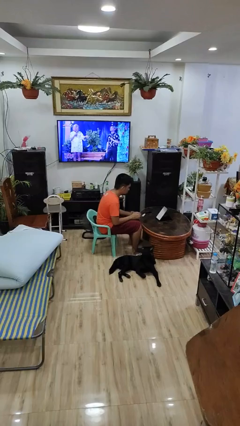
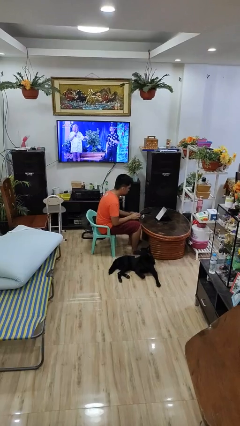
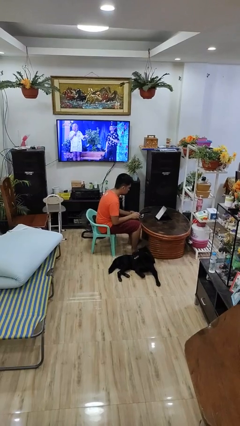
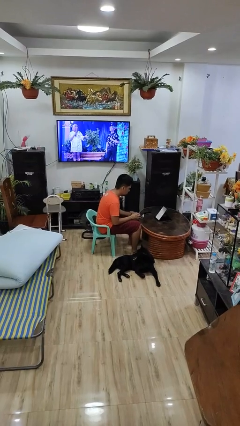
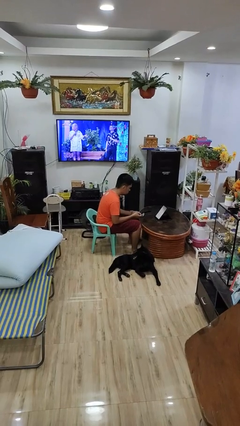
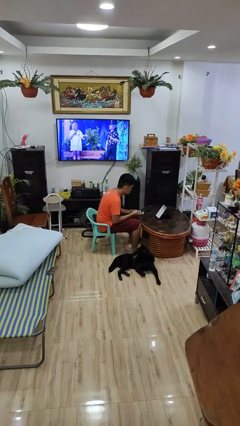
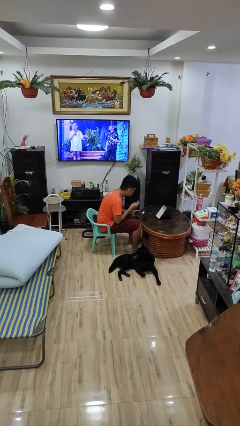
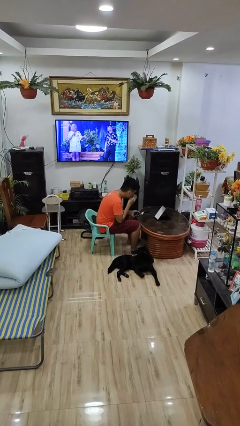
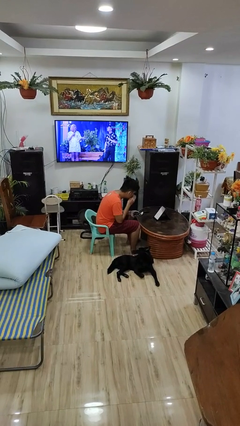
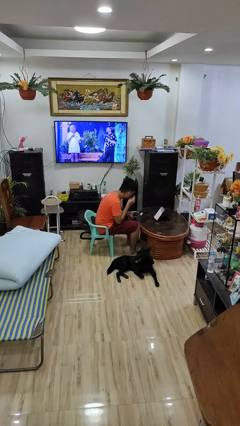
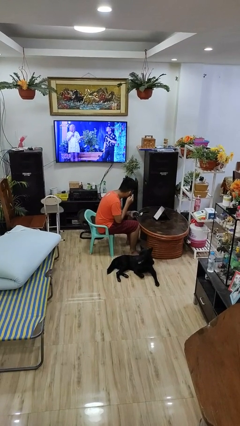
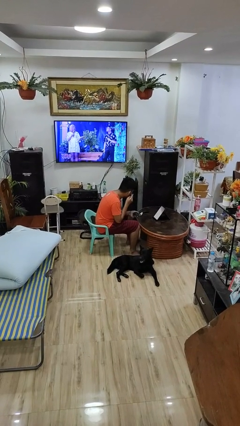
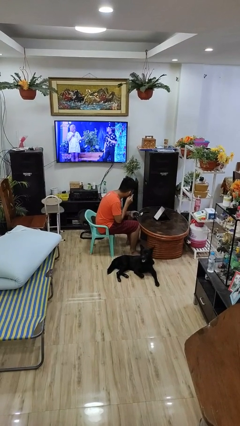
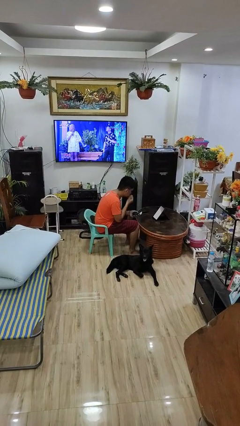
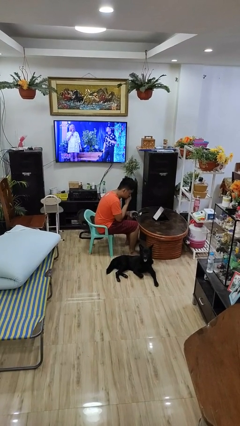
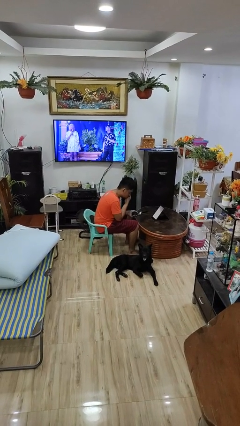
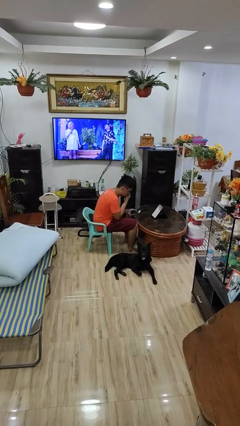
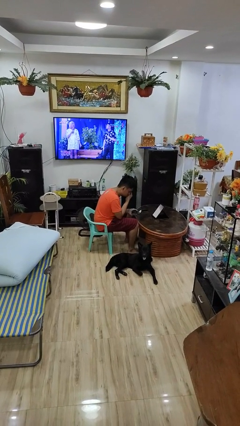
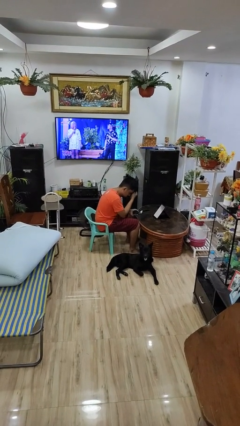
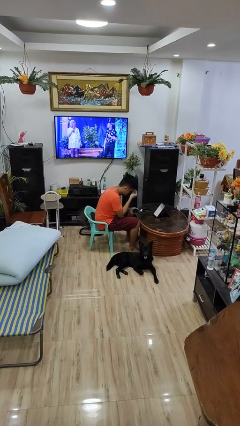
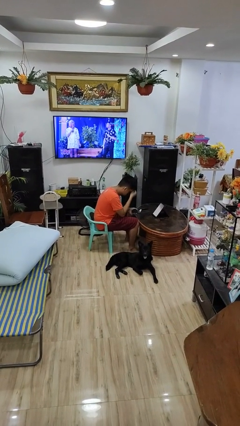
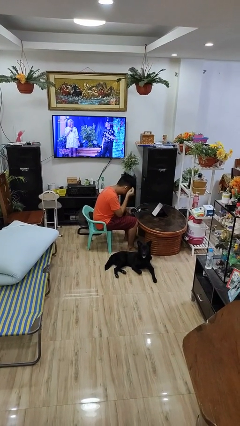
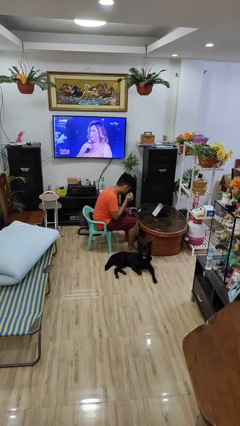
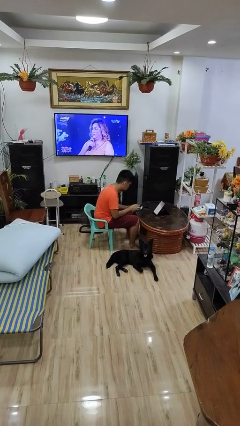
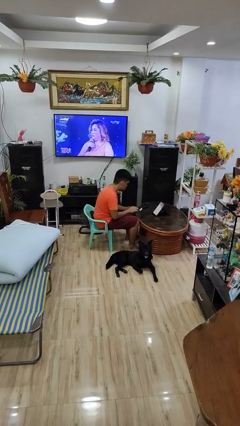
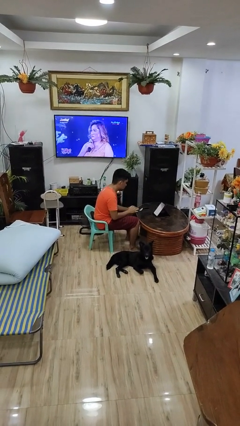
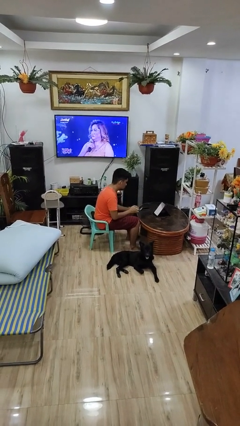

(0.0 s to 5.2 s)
person applies foundation makeup

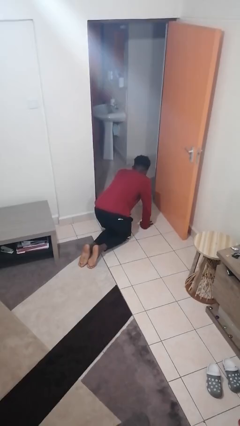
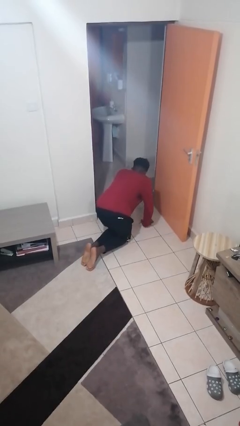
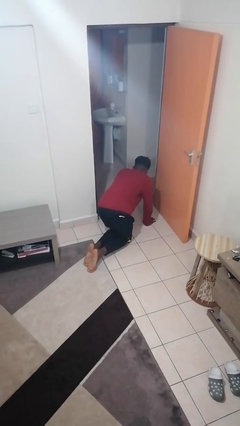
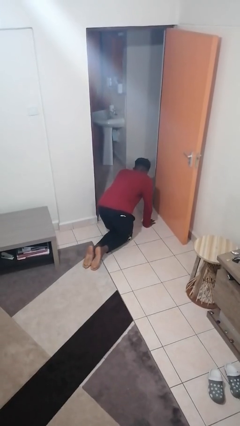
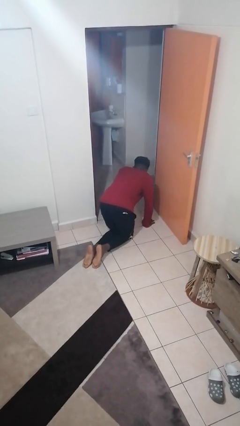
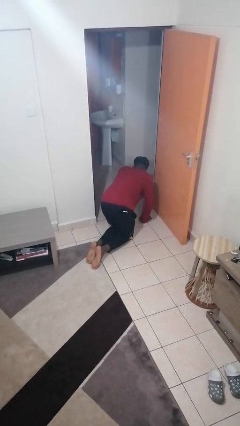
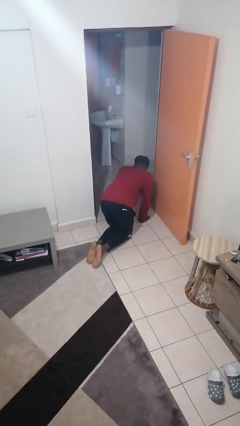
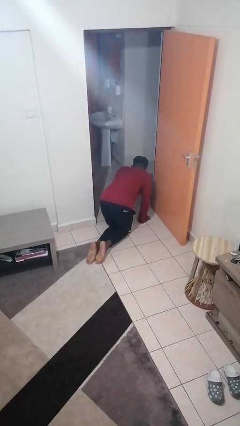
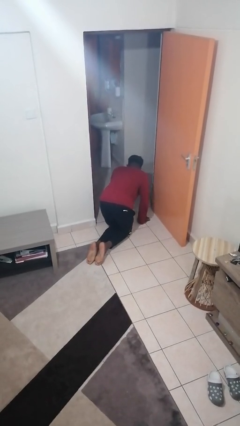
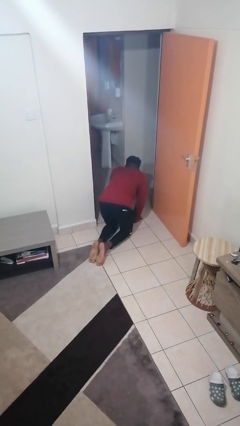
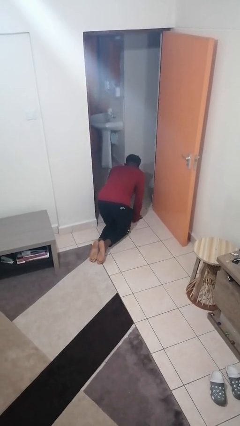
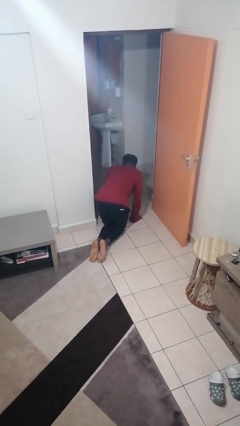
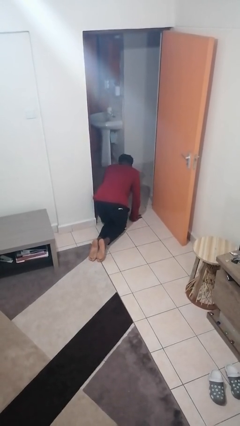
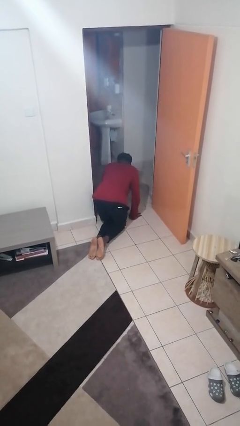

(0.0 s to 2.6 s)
person crawls

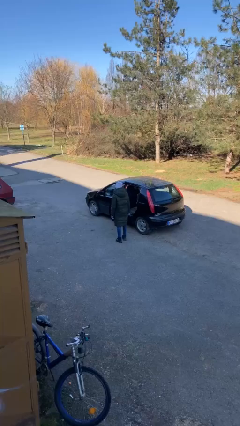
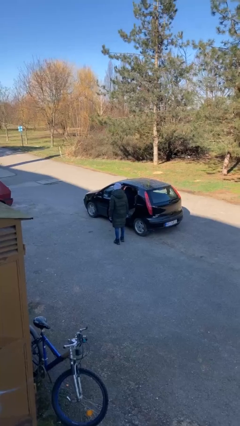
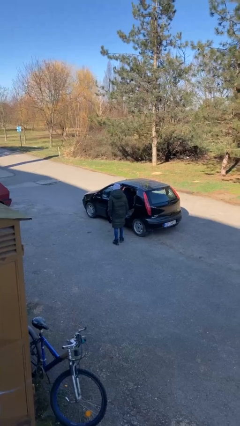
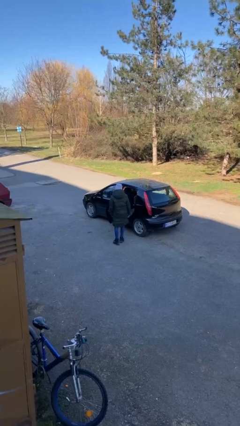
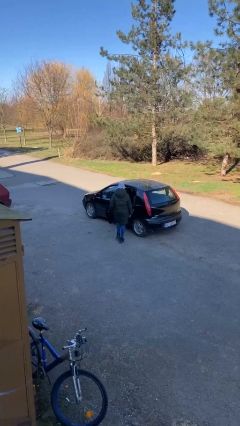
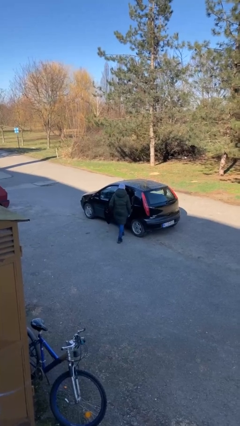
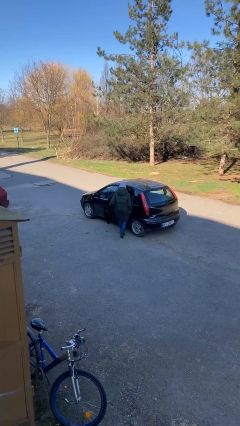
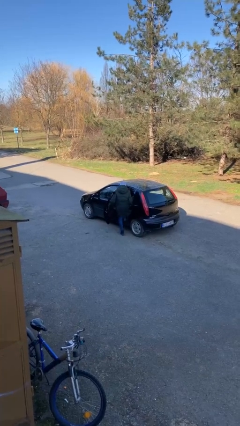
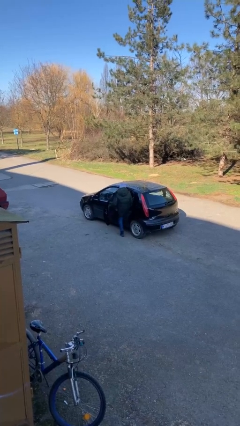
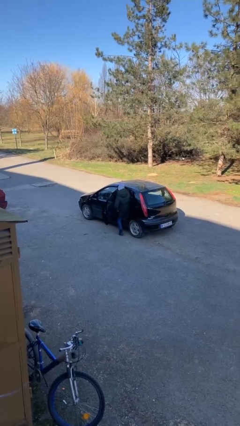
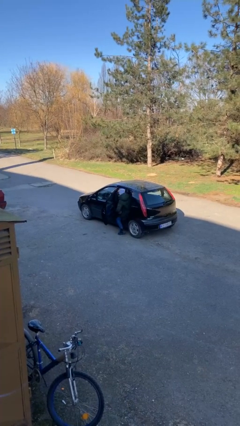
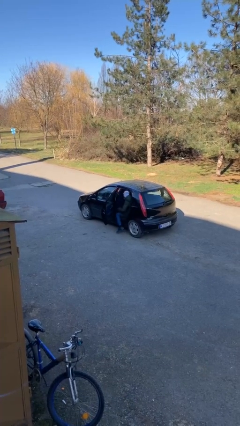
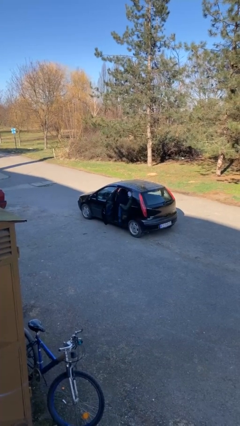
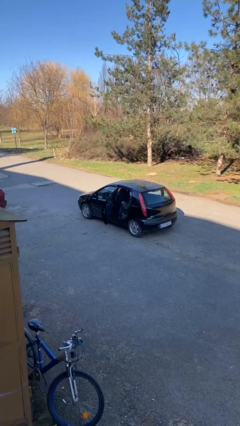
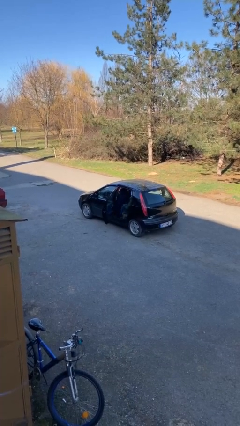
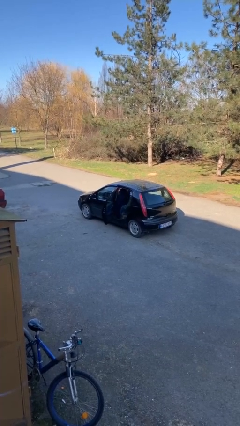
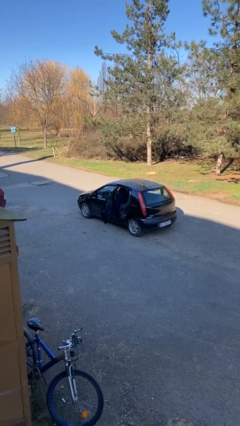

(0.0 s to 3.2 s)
person enters car

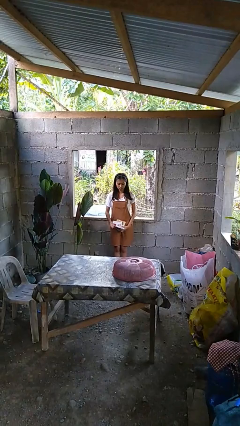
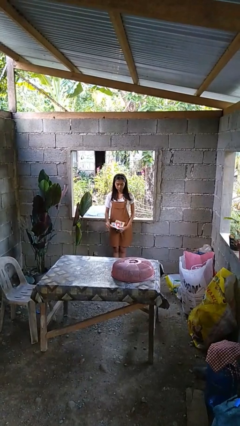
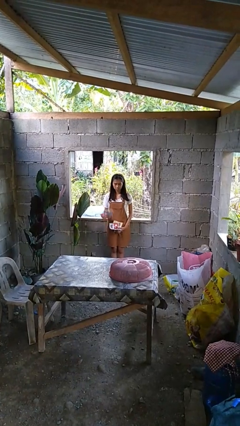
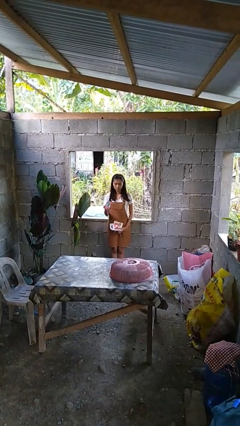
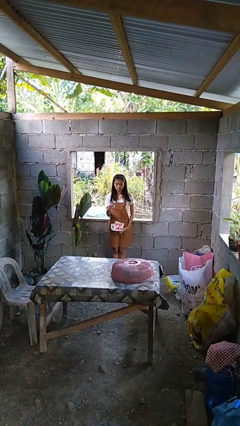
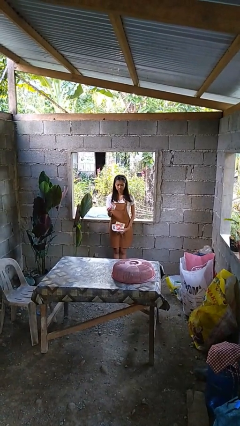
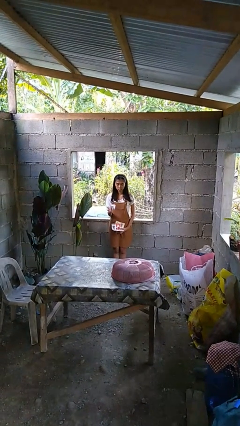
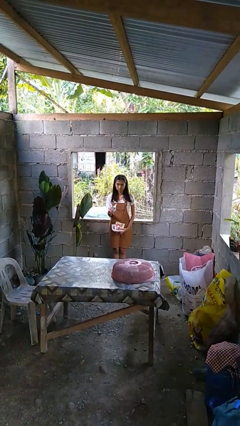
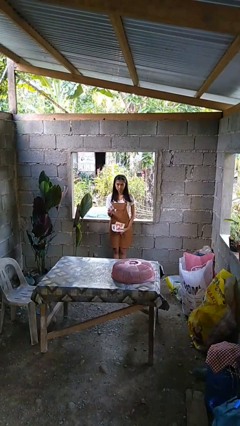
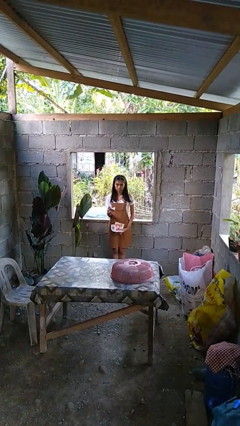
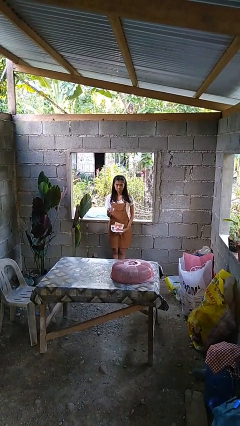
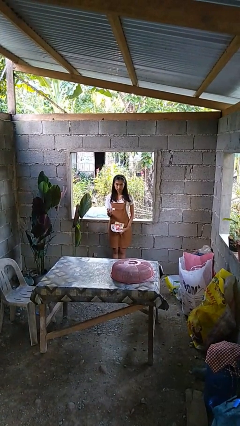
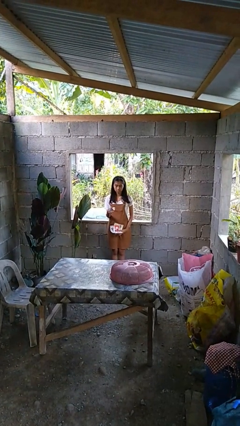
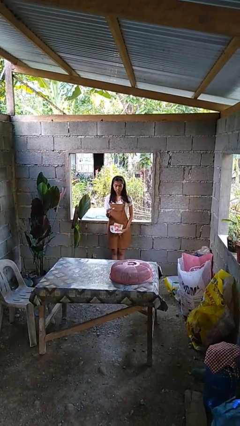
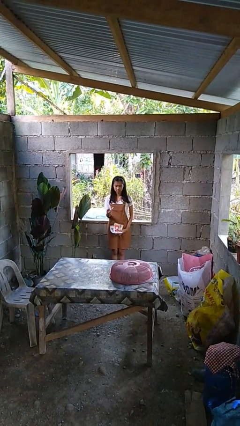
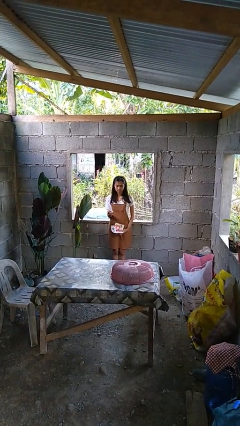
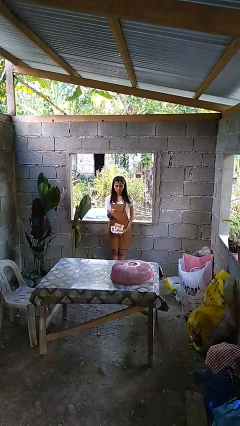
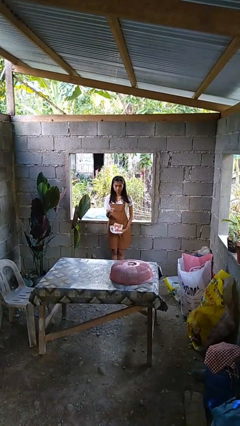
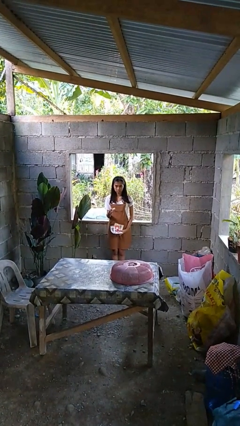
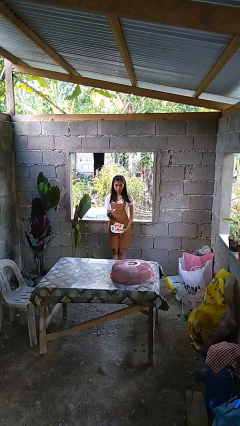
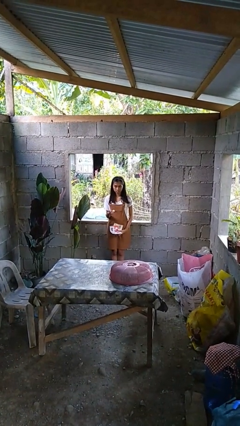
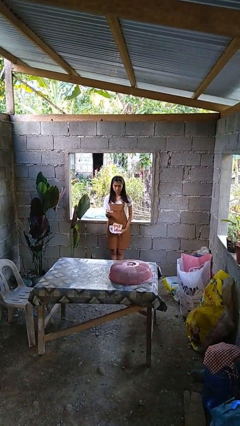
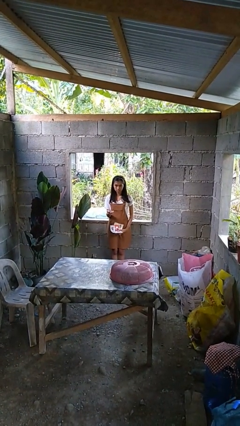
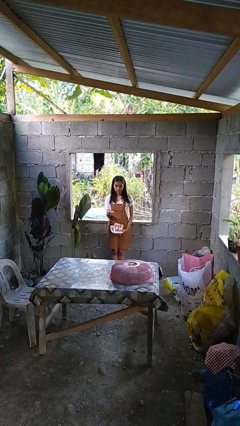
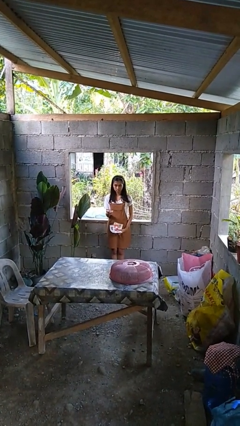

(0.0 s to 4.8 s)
person crumples paper

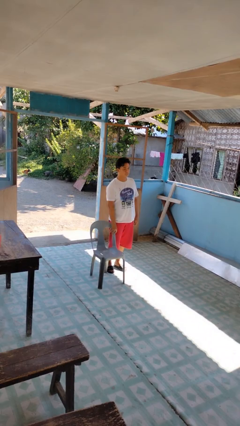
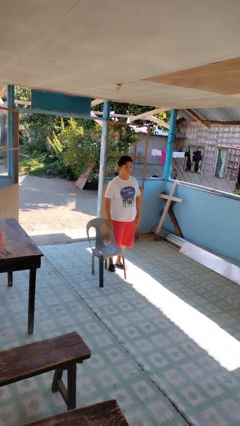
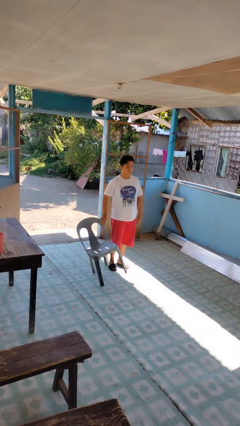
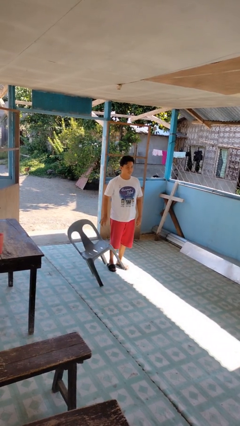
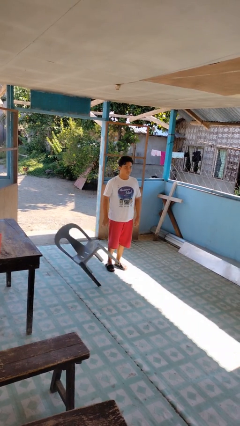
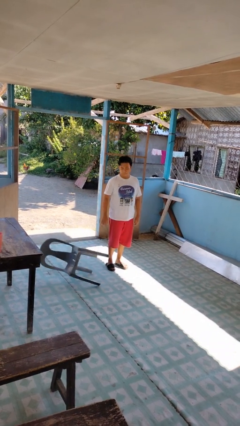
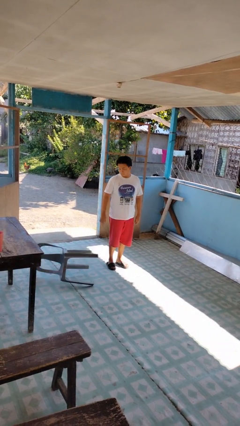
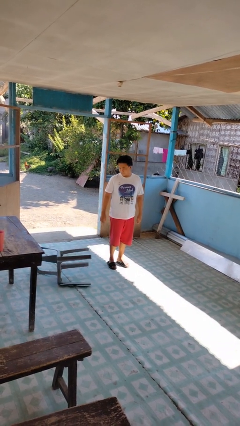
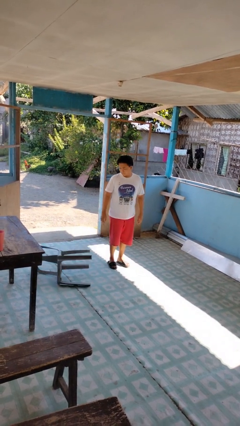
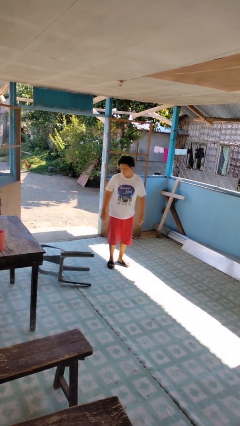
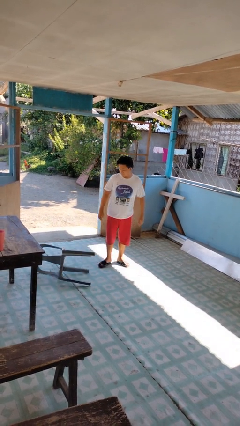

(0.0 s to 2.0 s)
person knocks over furniture
